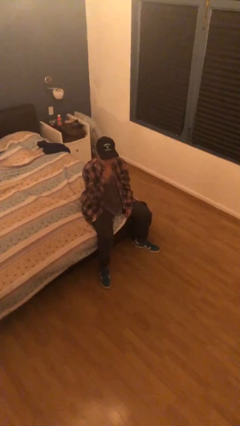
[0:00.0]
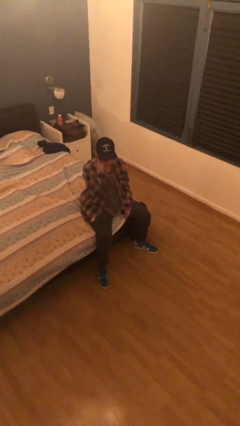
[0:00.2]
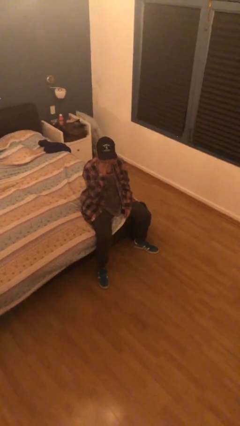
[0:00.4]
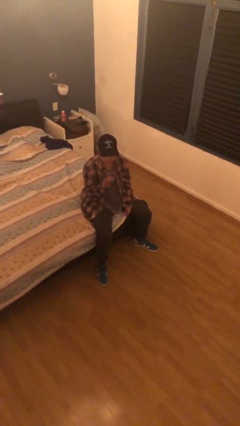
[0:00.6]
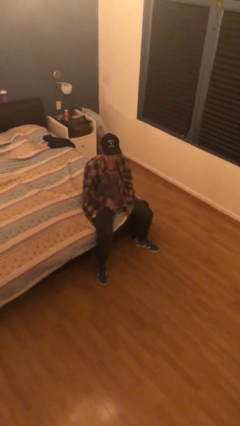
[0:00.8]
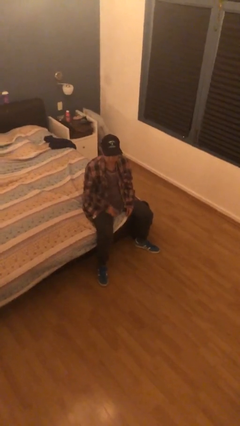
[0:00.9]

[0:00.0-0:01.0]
person takes off glasses

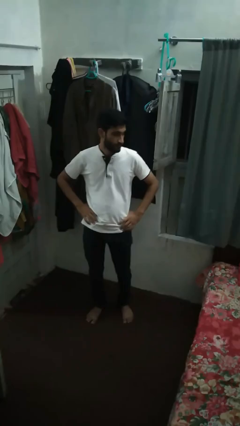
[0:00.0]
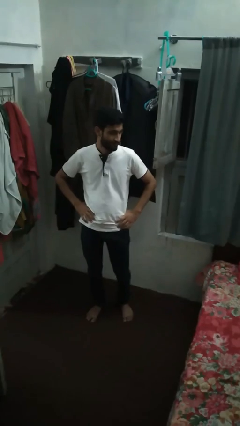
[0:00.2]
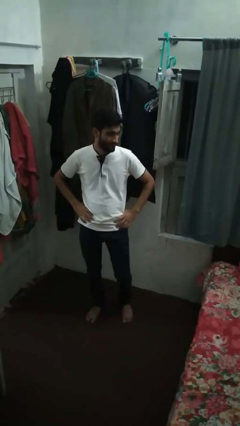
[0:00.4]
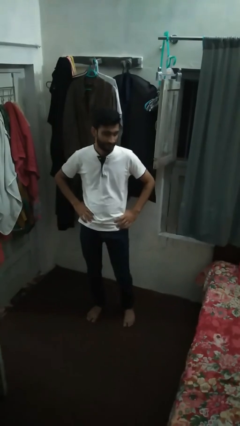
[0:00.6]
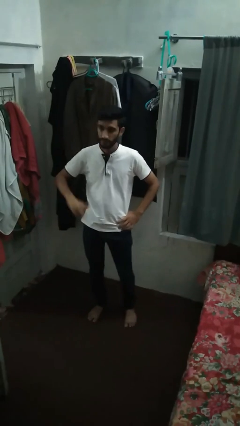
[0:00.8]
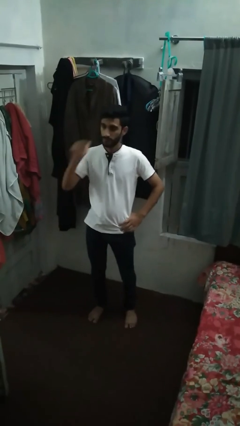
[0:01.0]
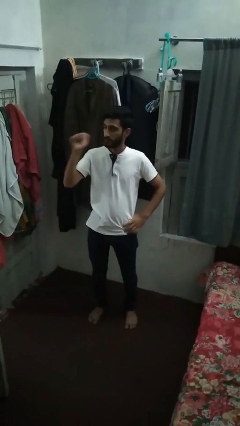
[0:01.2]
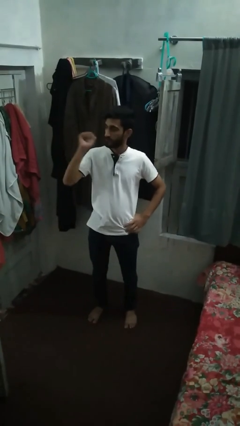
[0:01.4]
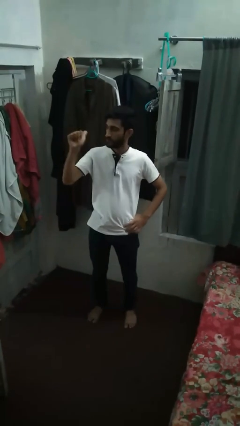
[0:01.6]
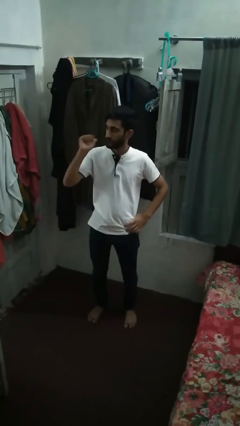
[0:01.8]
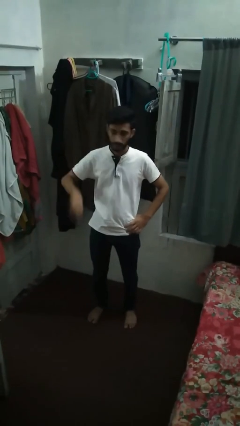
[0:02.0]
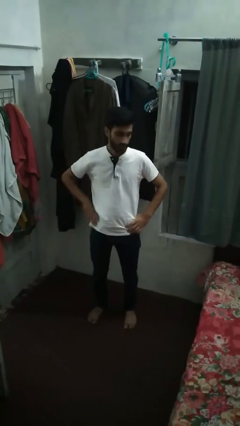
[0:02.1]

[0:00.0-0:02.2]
person gestures behind me

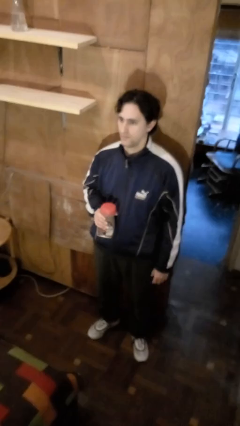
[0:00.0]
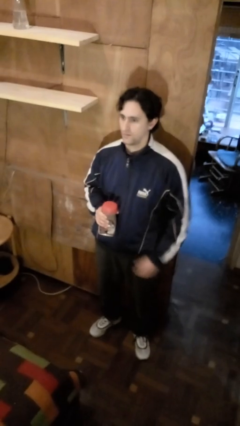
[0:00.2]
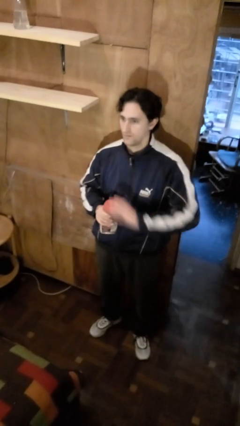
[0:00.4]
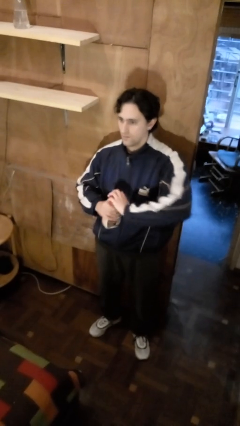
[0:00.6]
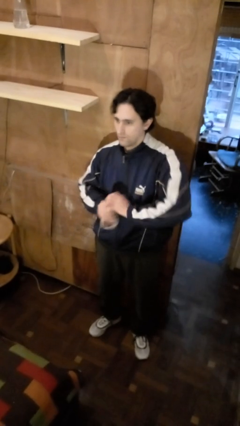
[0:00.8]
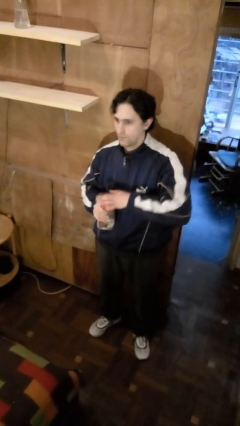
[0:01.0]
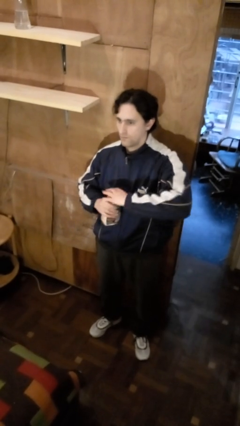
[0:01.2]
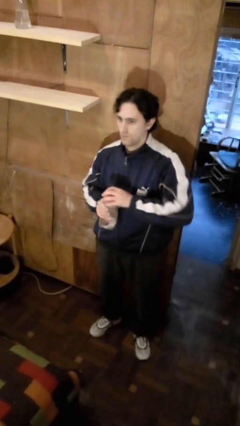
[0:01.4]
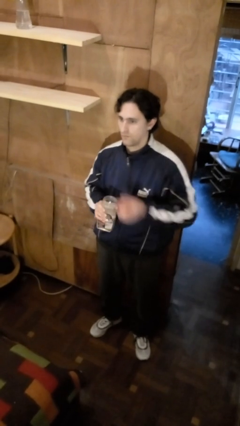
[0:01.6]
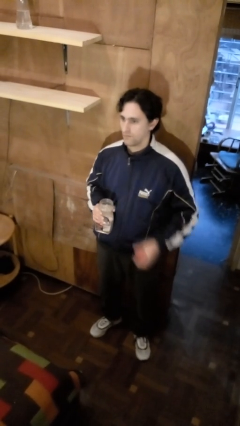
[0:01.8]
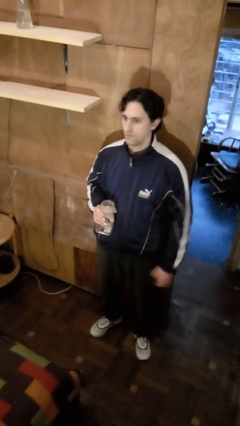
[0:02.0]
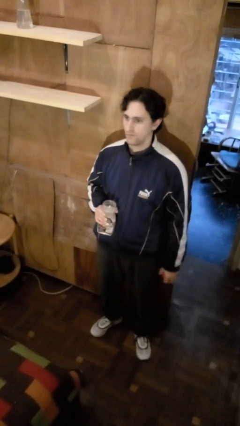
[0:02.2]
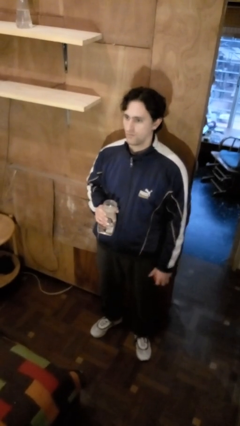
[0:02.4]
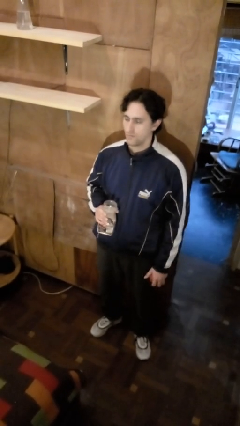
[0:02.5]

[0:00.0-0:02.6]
person opens jar

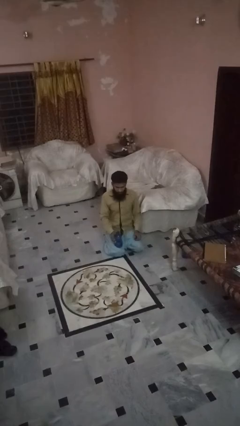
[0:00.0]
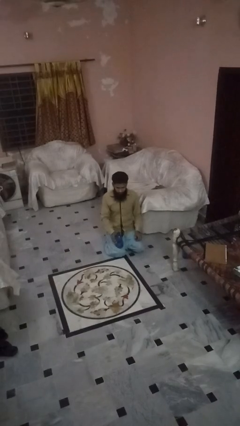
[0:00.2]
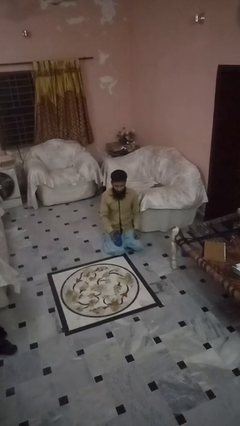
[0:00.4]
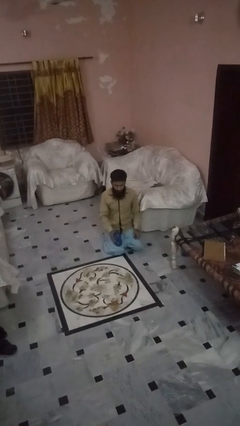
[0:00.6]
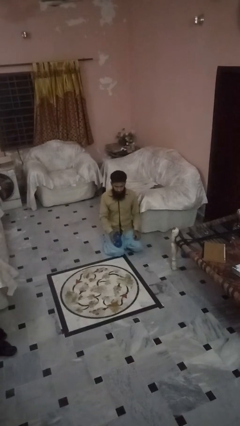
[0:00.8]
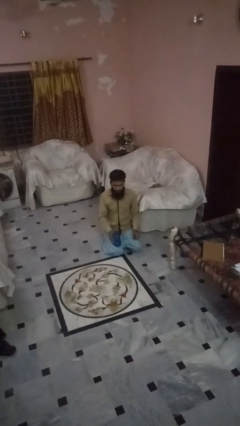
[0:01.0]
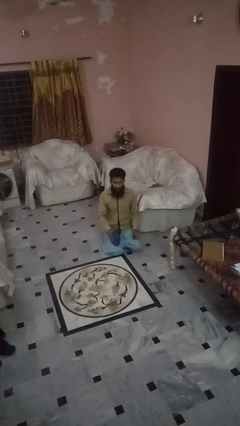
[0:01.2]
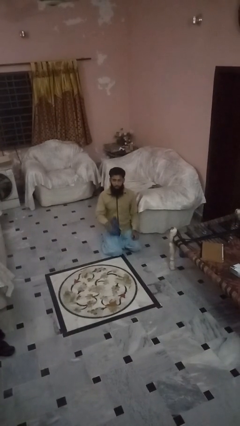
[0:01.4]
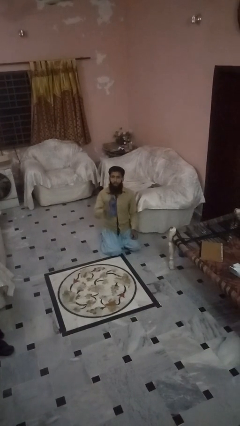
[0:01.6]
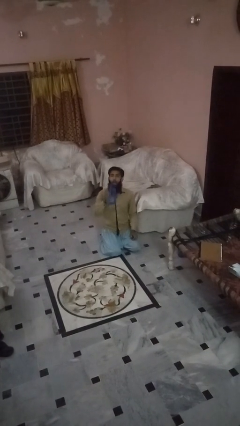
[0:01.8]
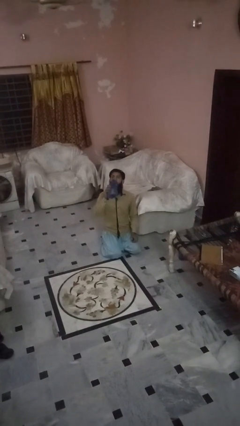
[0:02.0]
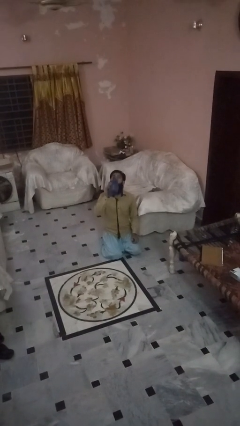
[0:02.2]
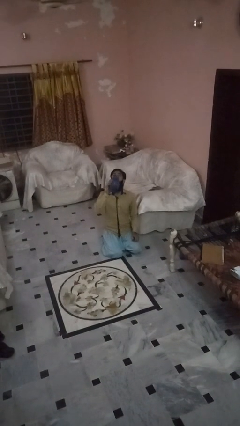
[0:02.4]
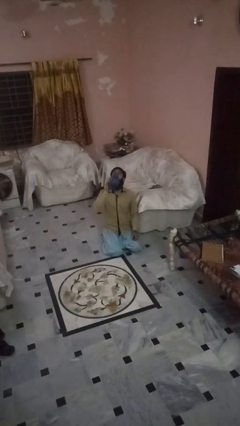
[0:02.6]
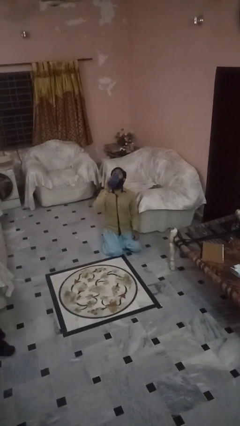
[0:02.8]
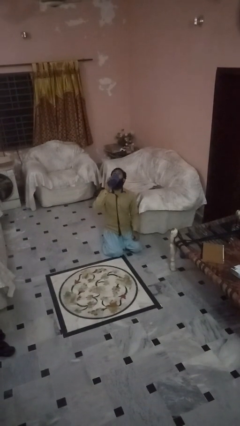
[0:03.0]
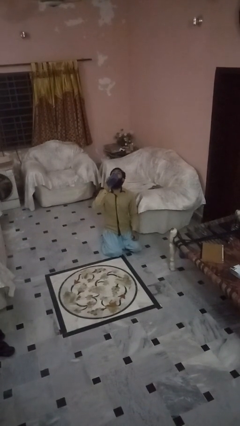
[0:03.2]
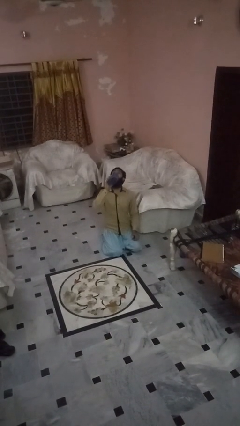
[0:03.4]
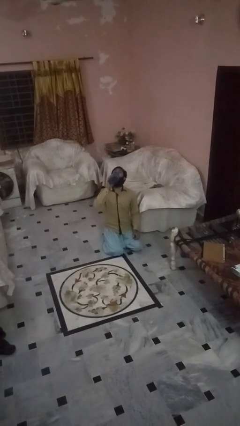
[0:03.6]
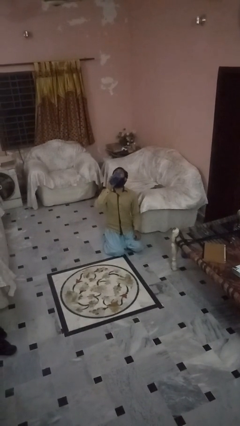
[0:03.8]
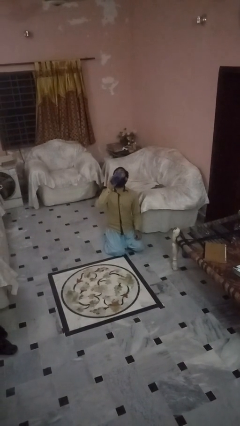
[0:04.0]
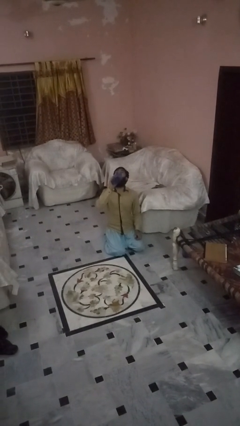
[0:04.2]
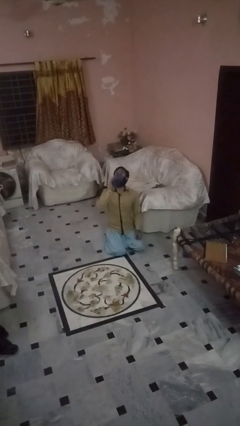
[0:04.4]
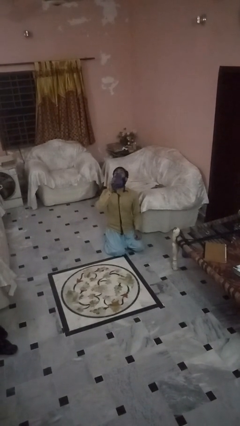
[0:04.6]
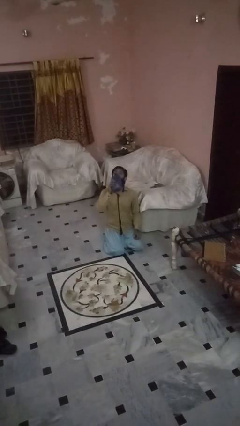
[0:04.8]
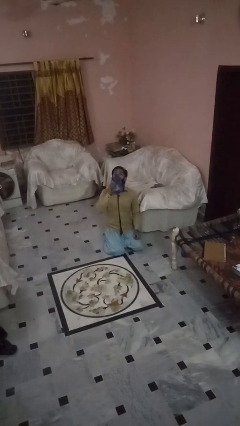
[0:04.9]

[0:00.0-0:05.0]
person drinks from bottle

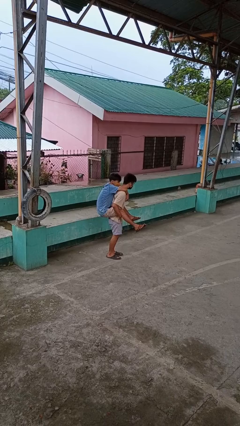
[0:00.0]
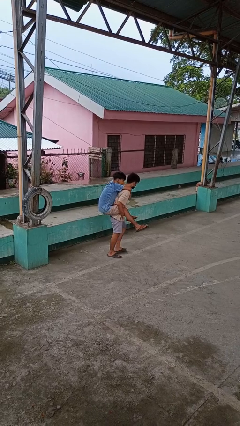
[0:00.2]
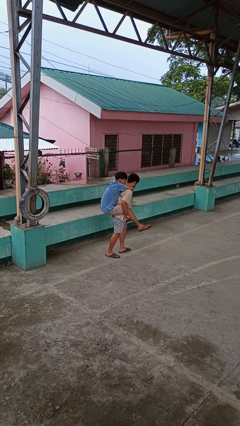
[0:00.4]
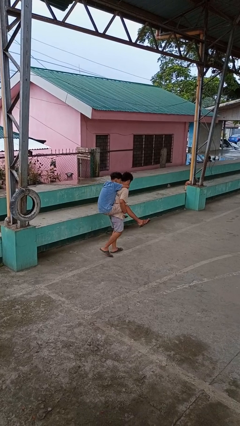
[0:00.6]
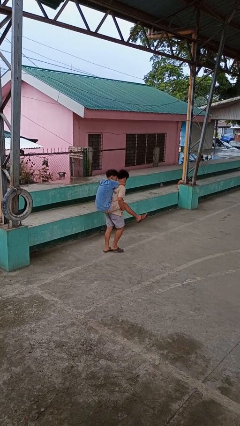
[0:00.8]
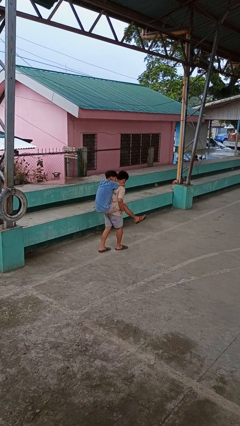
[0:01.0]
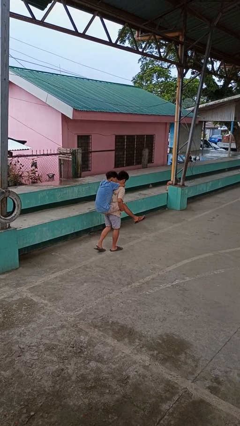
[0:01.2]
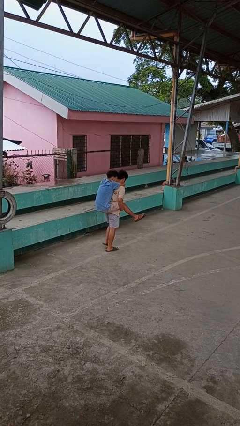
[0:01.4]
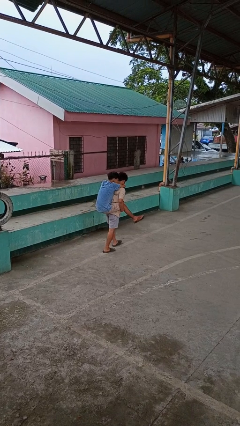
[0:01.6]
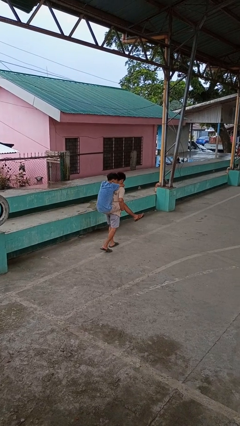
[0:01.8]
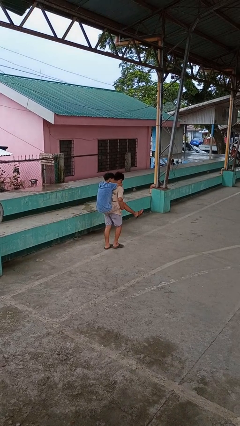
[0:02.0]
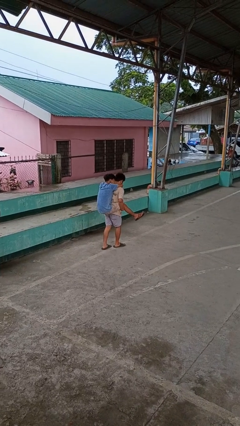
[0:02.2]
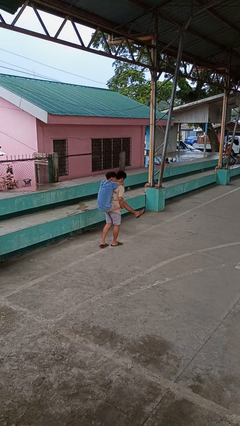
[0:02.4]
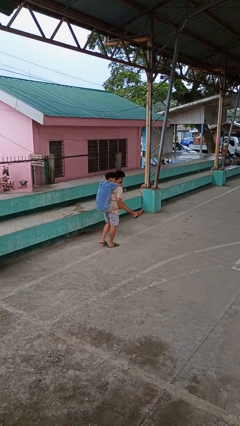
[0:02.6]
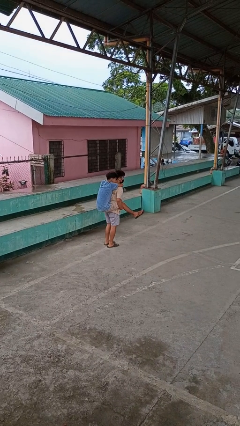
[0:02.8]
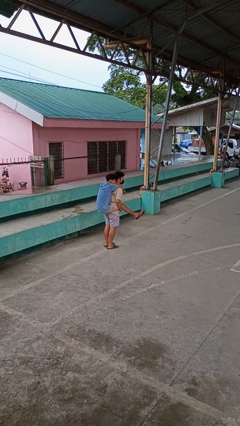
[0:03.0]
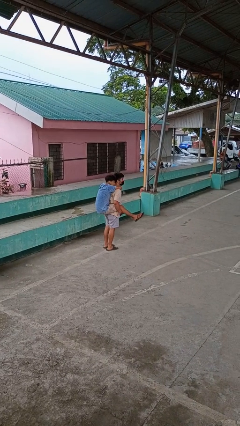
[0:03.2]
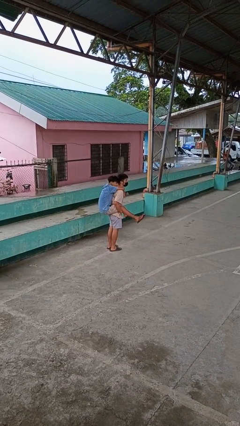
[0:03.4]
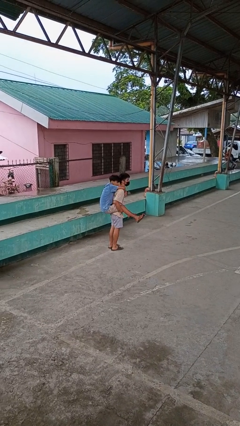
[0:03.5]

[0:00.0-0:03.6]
person carries person on back

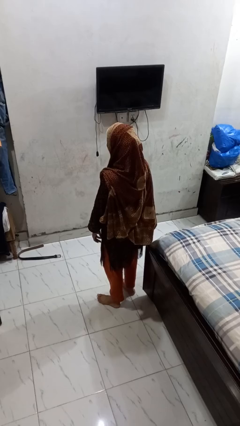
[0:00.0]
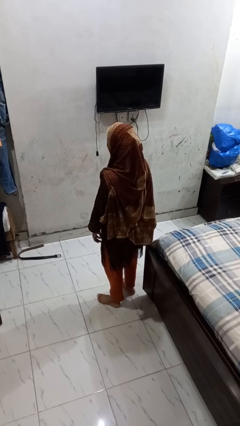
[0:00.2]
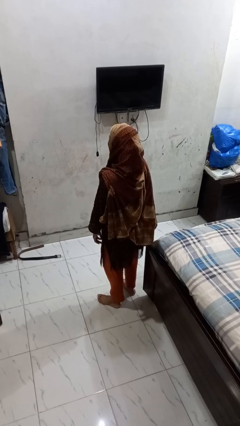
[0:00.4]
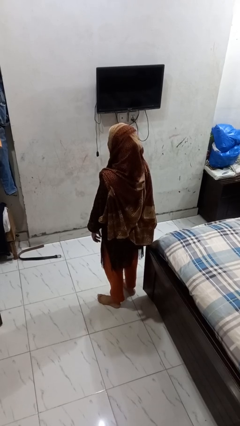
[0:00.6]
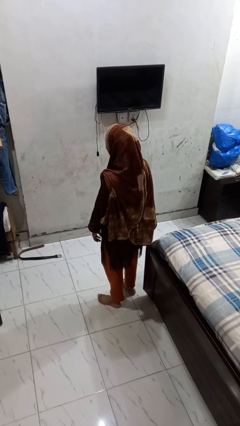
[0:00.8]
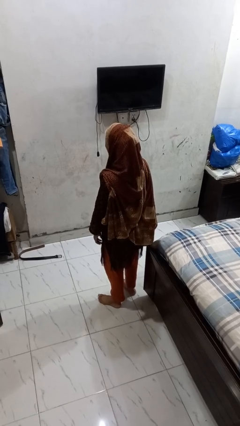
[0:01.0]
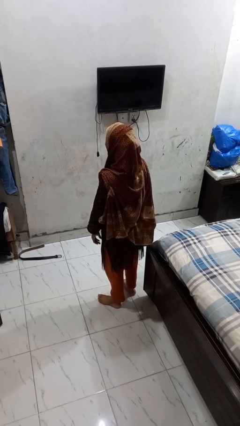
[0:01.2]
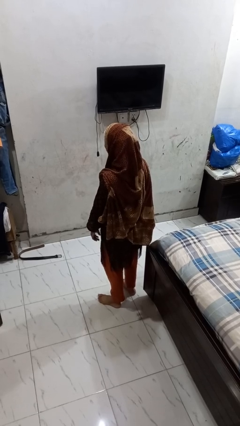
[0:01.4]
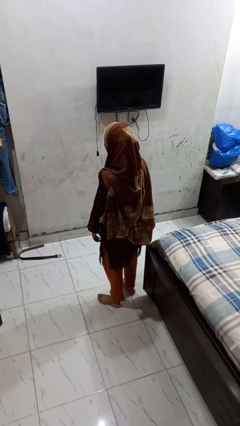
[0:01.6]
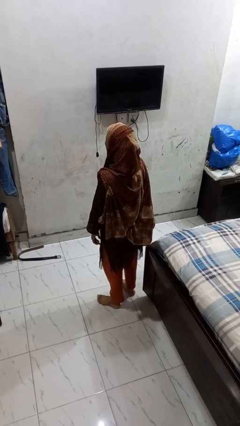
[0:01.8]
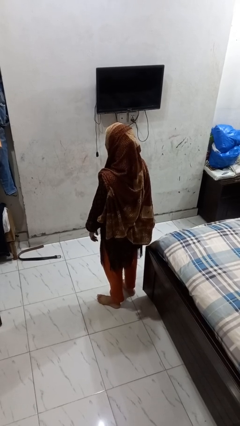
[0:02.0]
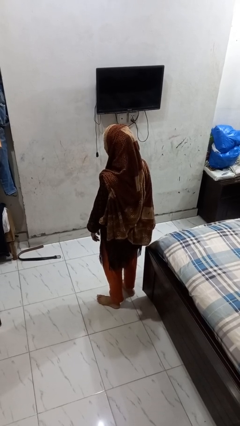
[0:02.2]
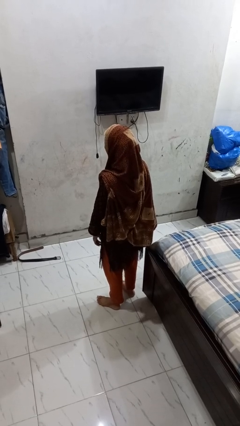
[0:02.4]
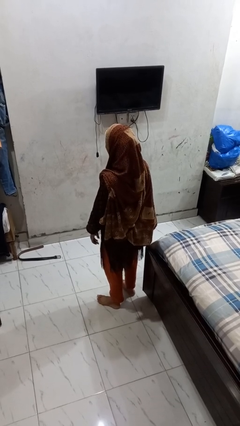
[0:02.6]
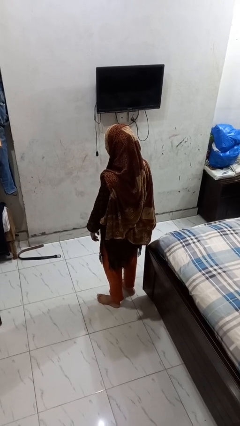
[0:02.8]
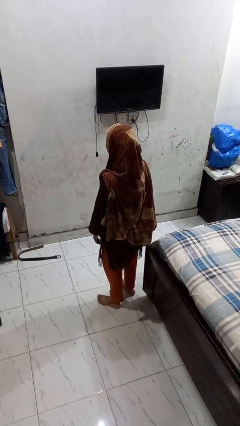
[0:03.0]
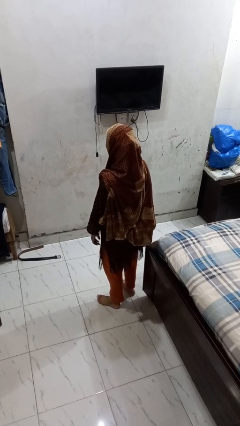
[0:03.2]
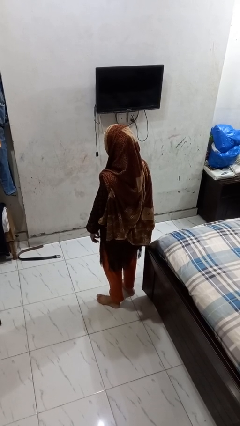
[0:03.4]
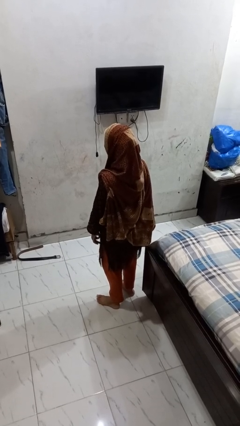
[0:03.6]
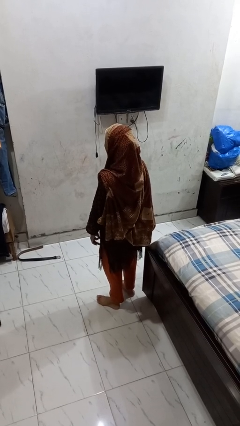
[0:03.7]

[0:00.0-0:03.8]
person nods head
